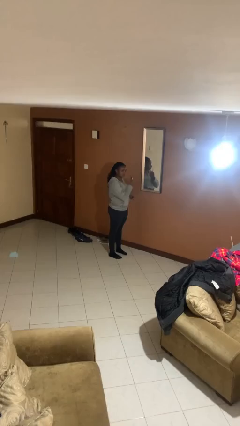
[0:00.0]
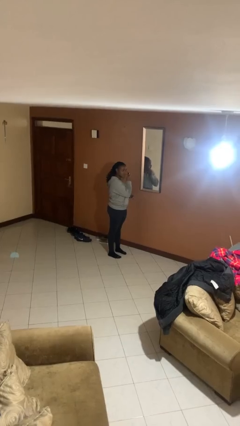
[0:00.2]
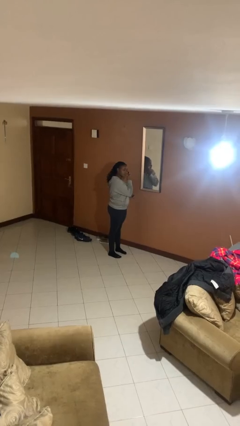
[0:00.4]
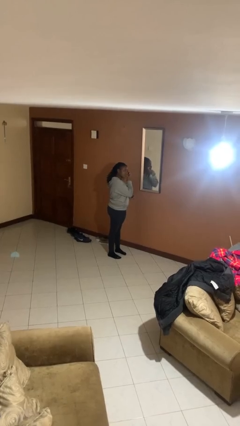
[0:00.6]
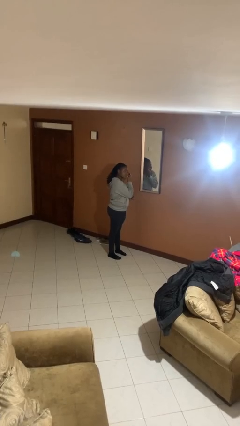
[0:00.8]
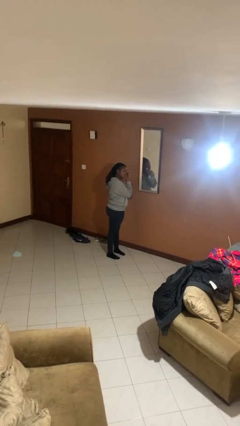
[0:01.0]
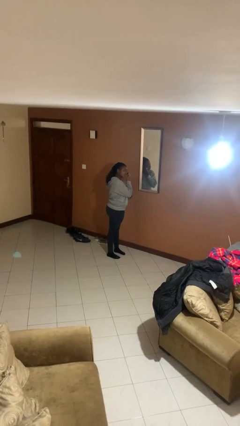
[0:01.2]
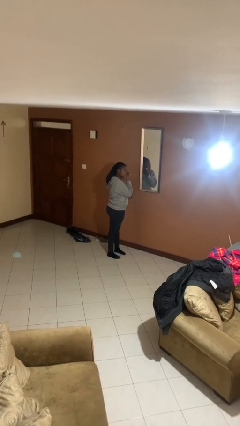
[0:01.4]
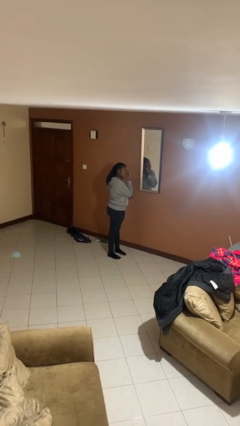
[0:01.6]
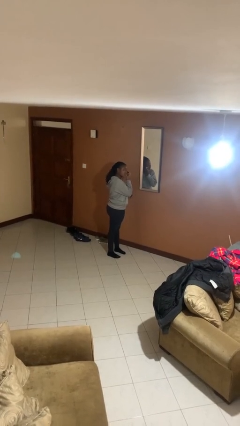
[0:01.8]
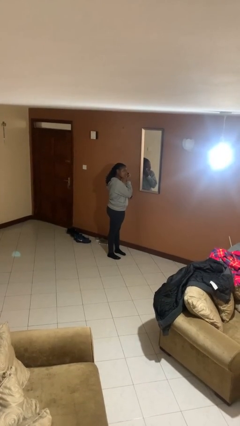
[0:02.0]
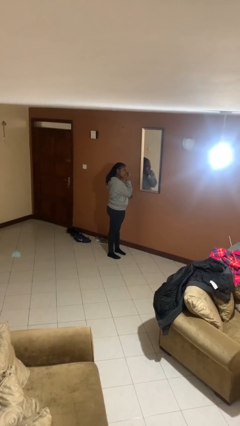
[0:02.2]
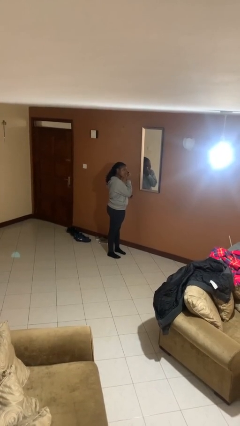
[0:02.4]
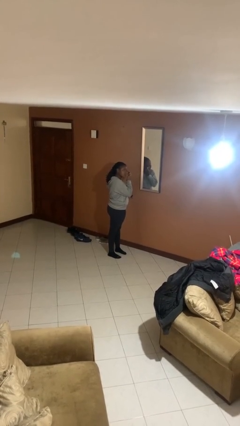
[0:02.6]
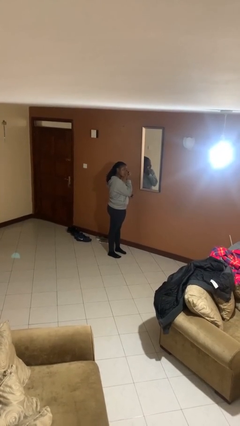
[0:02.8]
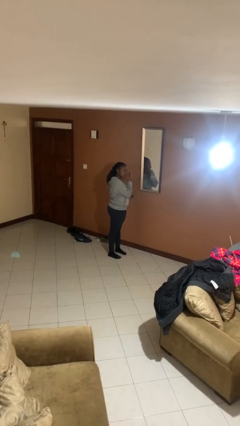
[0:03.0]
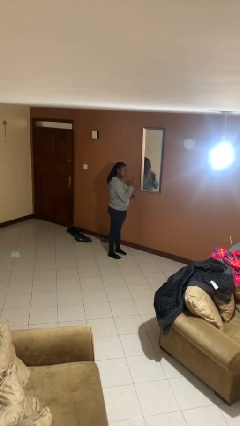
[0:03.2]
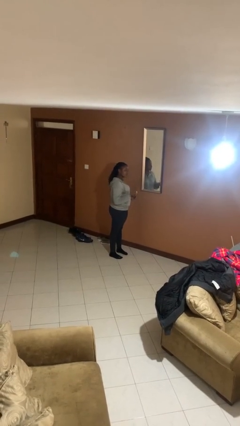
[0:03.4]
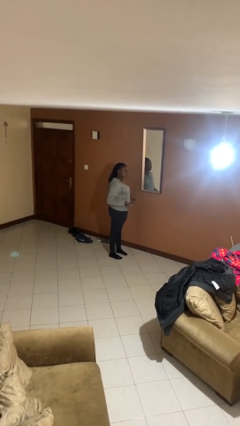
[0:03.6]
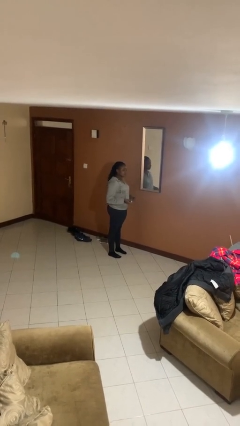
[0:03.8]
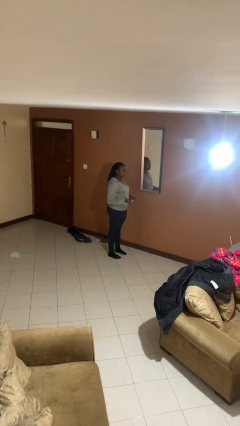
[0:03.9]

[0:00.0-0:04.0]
person applies eye makeup

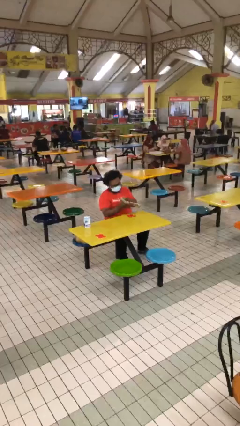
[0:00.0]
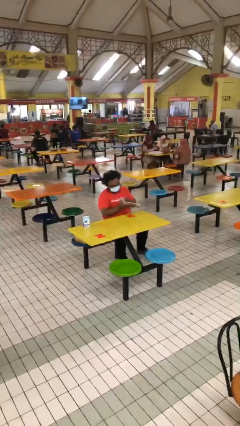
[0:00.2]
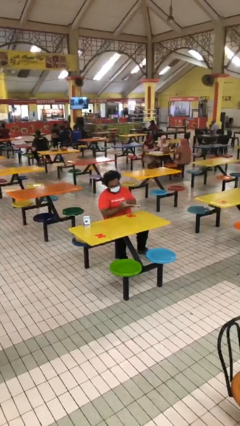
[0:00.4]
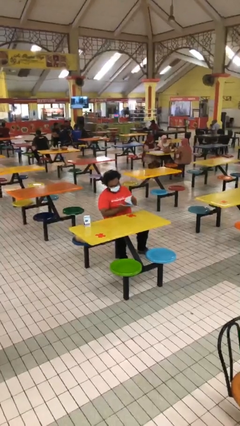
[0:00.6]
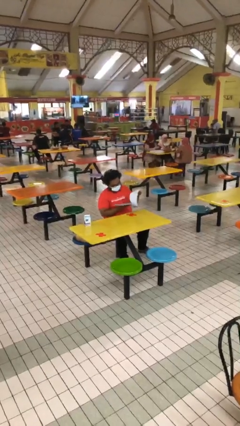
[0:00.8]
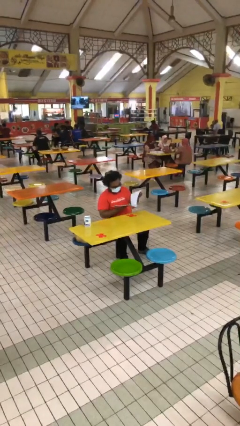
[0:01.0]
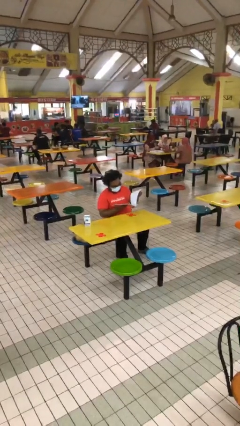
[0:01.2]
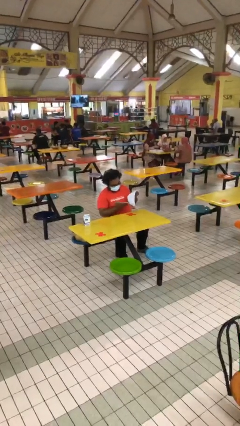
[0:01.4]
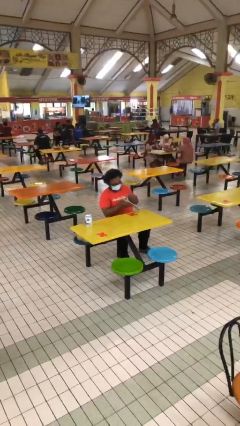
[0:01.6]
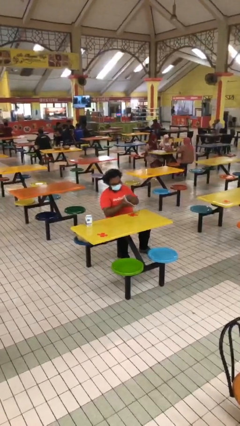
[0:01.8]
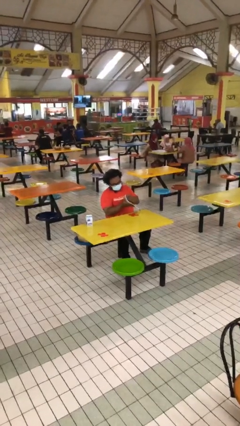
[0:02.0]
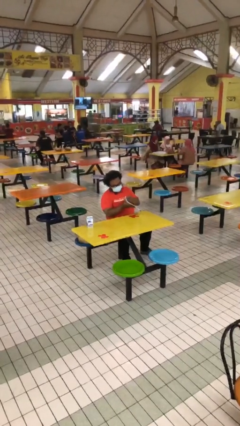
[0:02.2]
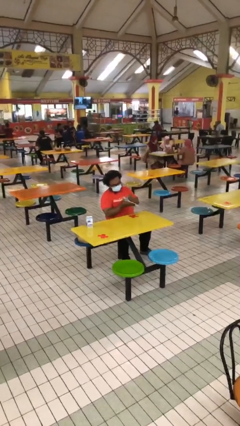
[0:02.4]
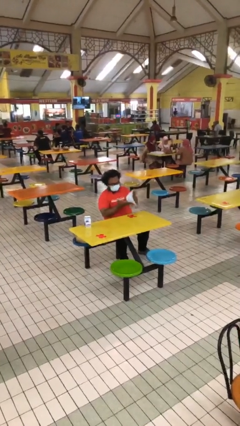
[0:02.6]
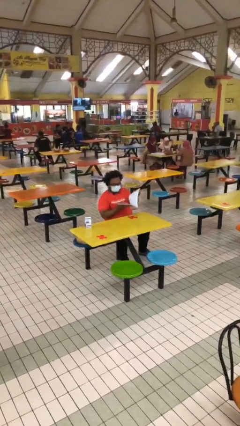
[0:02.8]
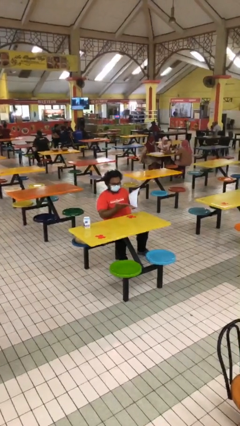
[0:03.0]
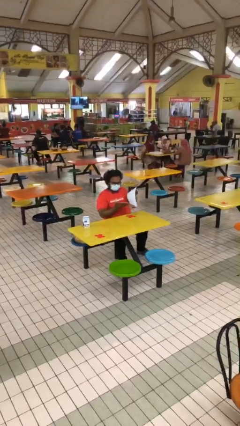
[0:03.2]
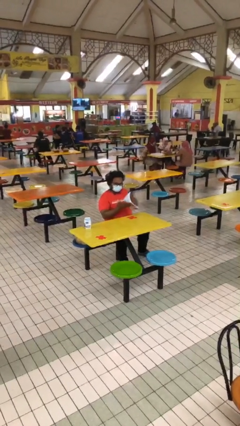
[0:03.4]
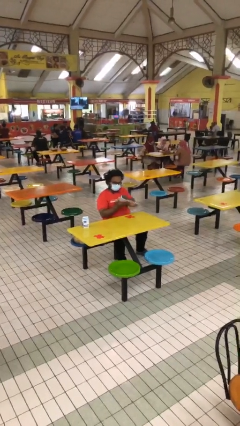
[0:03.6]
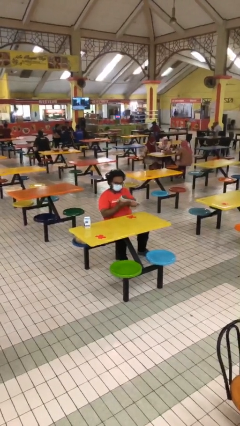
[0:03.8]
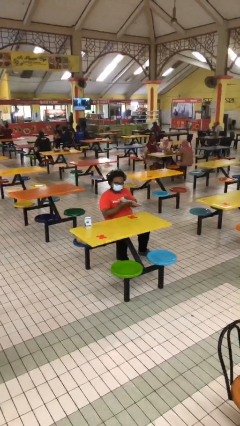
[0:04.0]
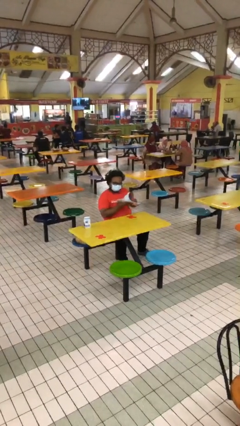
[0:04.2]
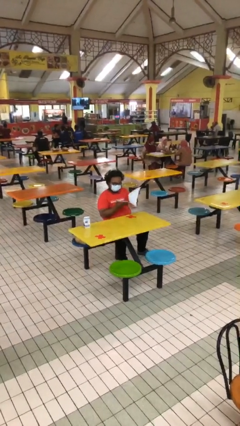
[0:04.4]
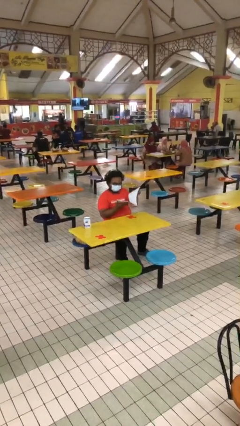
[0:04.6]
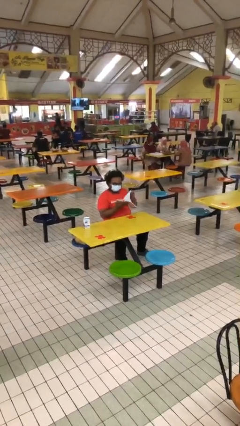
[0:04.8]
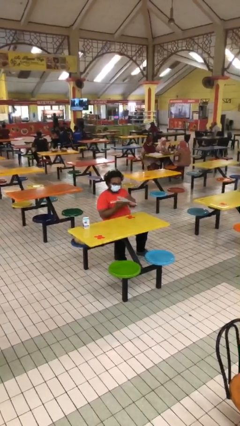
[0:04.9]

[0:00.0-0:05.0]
person reads document

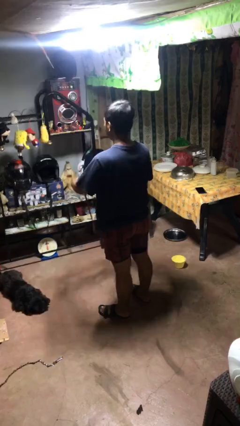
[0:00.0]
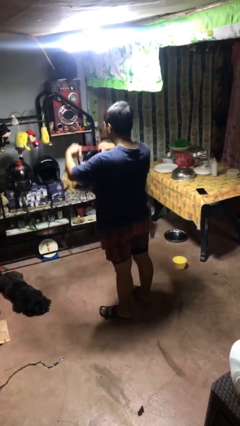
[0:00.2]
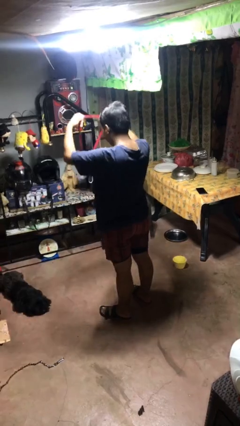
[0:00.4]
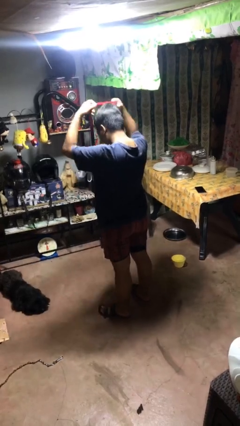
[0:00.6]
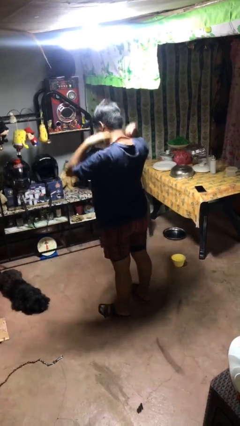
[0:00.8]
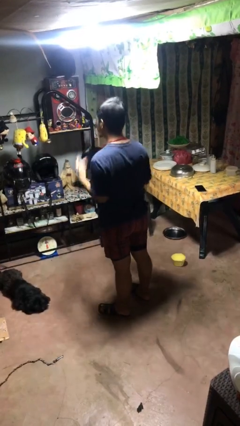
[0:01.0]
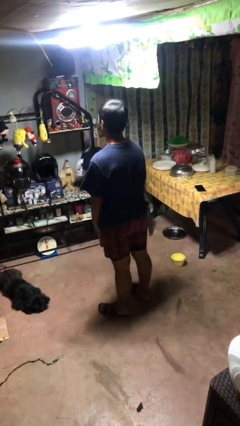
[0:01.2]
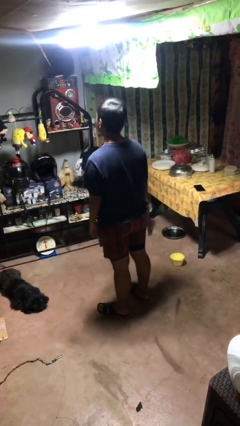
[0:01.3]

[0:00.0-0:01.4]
person puts on necklace

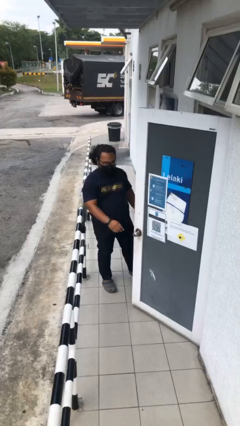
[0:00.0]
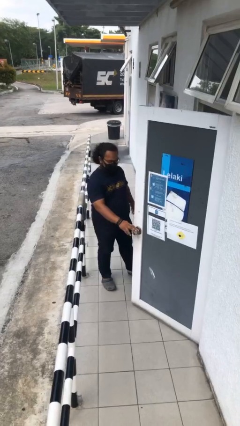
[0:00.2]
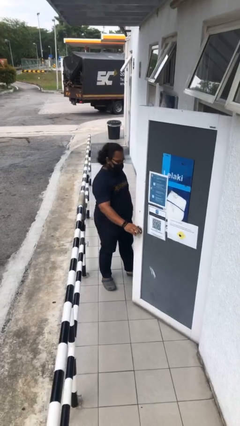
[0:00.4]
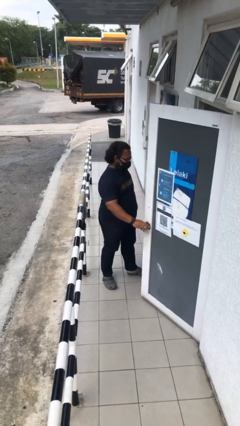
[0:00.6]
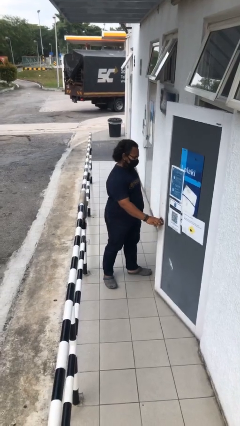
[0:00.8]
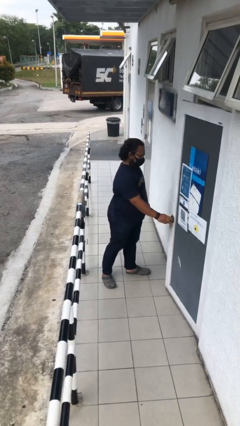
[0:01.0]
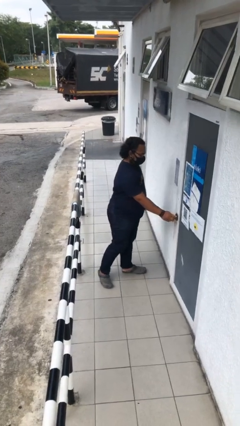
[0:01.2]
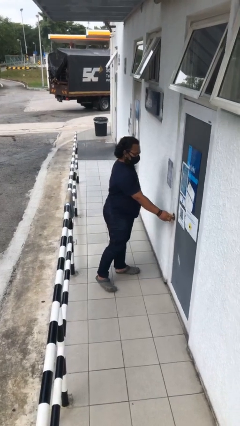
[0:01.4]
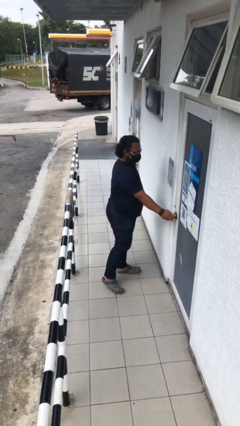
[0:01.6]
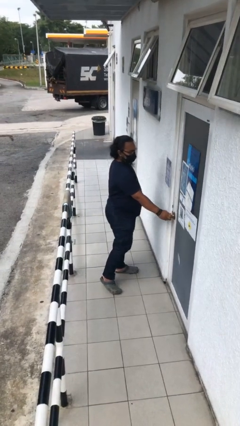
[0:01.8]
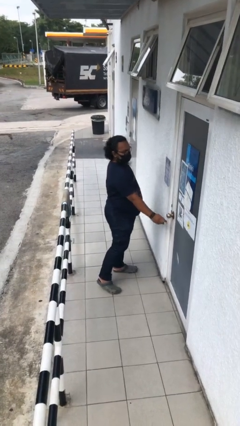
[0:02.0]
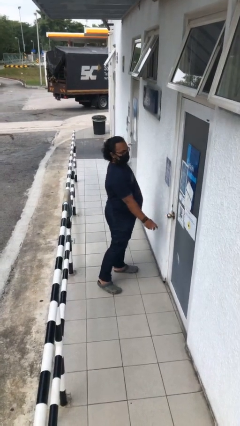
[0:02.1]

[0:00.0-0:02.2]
person closes facility door

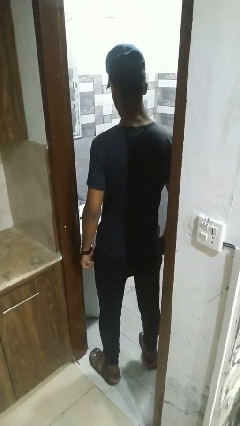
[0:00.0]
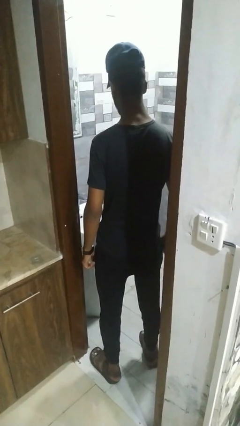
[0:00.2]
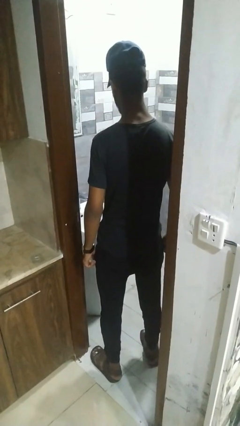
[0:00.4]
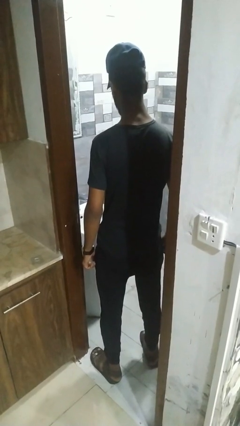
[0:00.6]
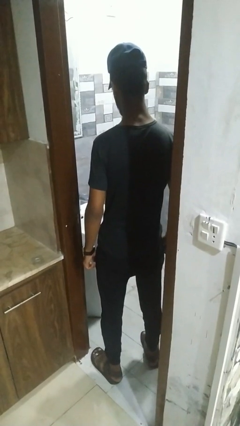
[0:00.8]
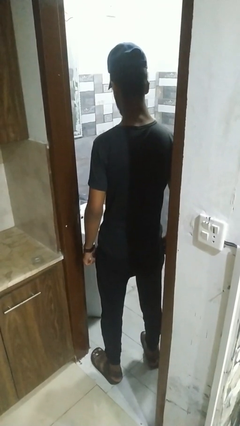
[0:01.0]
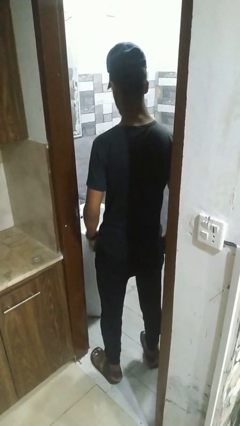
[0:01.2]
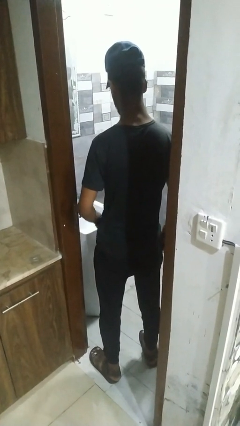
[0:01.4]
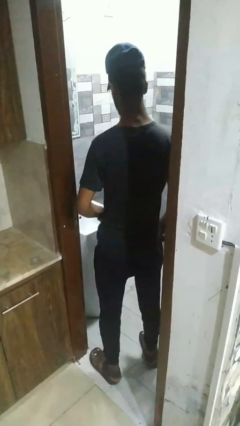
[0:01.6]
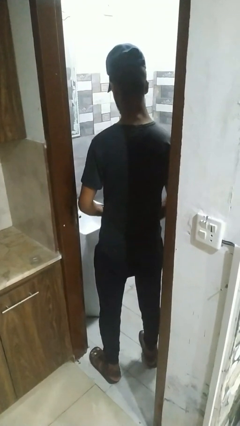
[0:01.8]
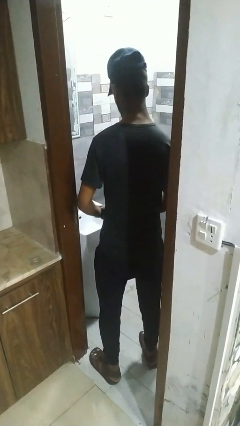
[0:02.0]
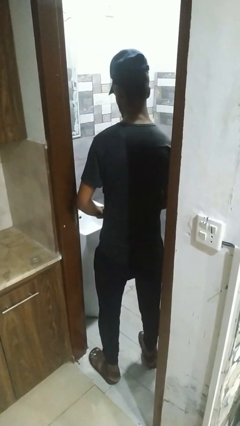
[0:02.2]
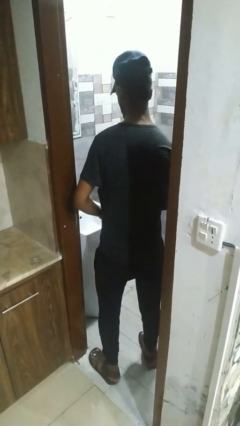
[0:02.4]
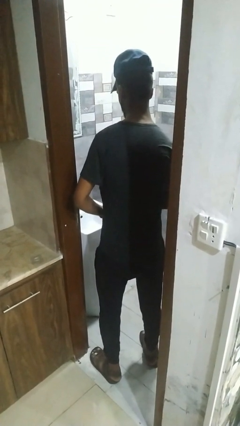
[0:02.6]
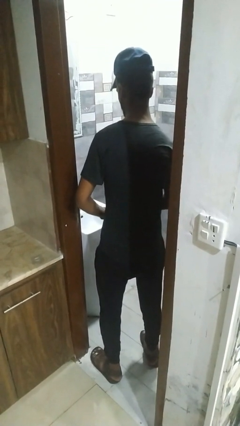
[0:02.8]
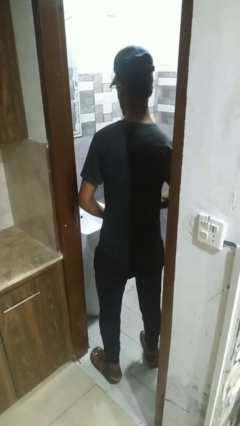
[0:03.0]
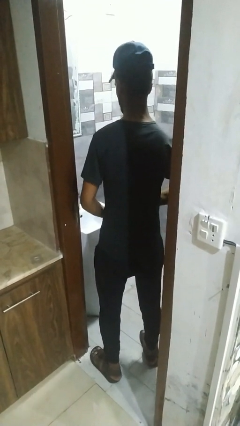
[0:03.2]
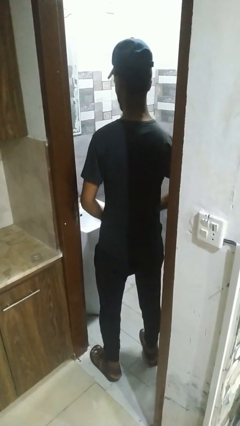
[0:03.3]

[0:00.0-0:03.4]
person applies deodorant

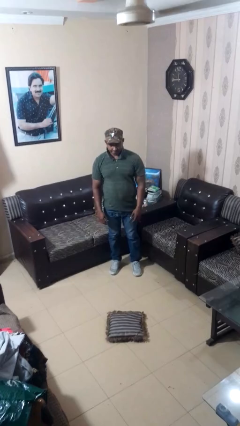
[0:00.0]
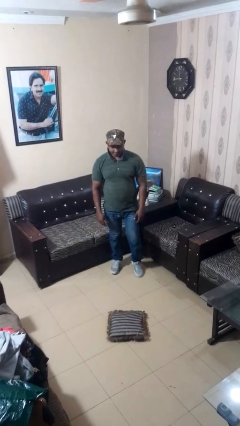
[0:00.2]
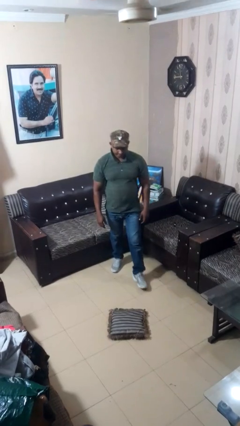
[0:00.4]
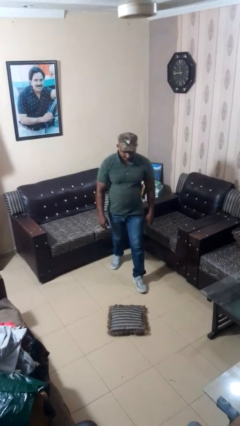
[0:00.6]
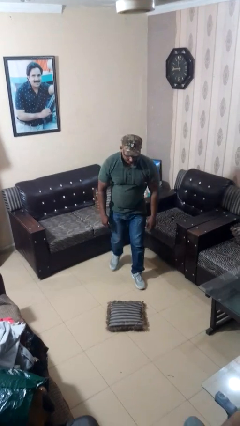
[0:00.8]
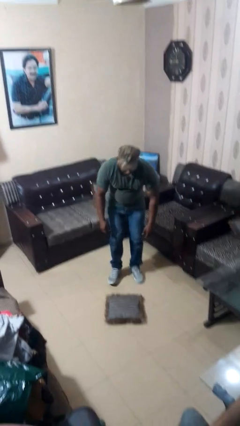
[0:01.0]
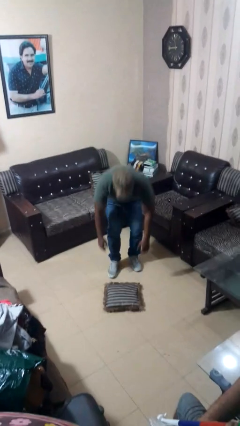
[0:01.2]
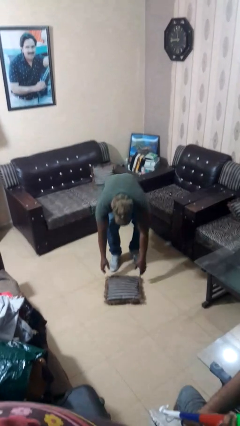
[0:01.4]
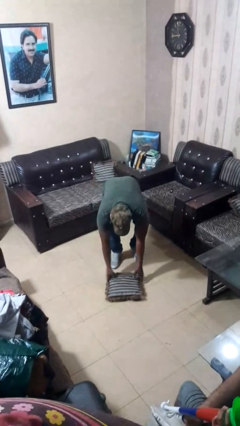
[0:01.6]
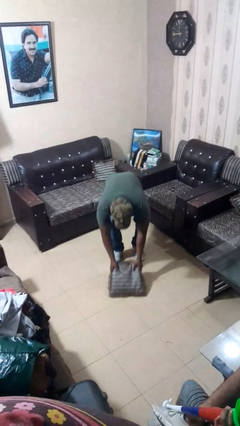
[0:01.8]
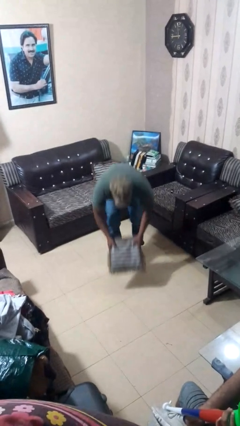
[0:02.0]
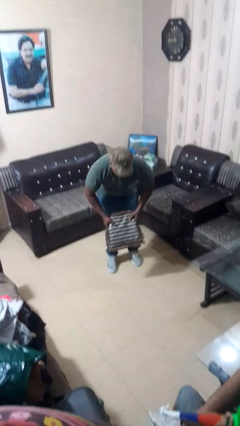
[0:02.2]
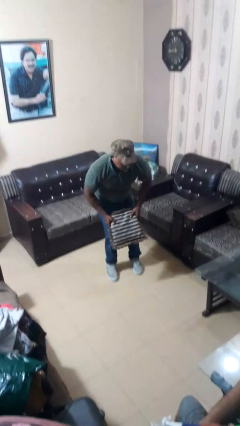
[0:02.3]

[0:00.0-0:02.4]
person picks up object from floor
